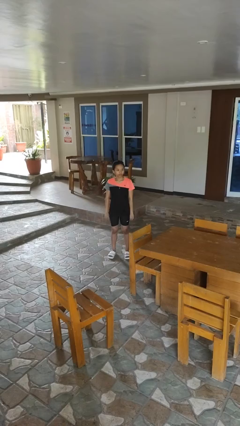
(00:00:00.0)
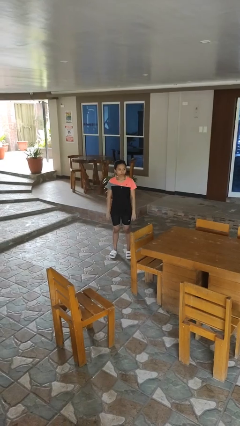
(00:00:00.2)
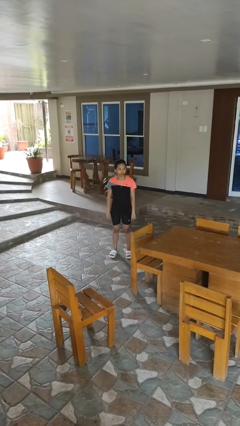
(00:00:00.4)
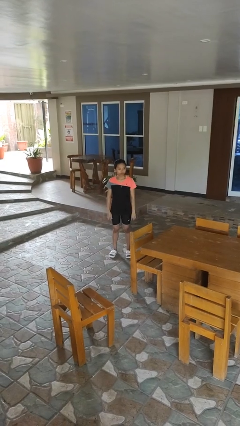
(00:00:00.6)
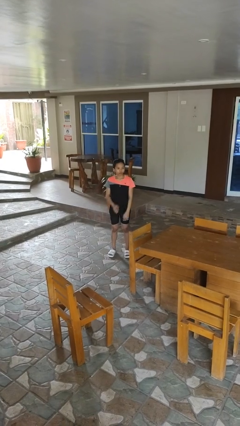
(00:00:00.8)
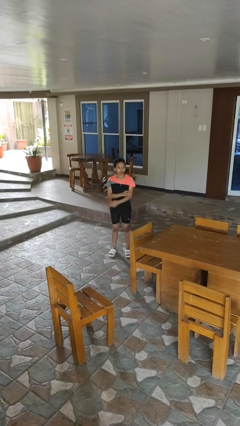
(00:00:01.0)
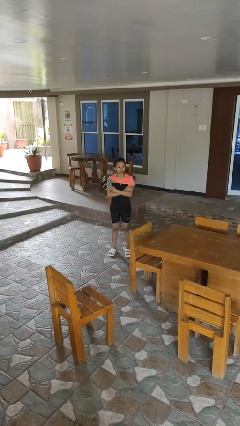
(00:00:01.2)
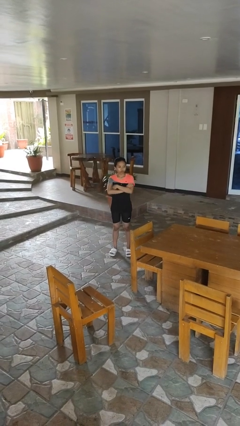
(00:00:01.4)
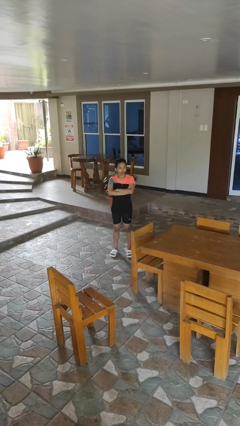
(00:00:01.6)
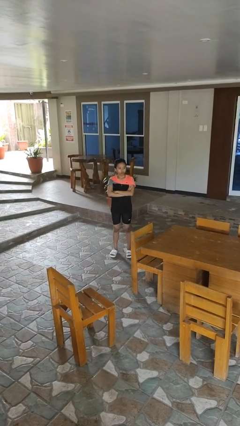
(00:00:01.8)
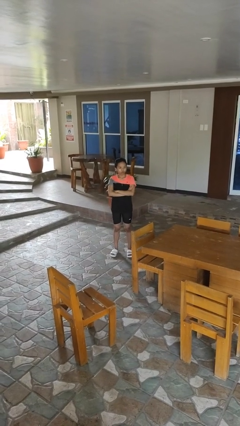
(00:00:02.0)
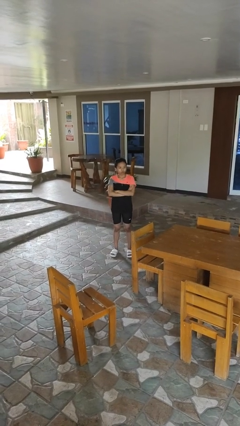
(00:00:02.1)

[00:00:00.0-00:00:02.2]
person crosses arms

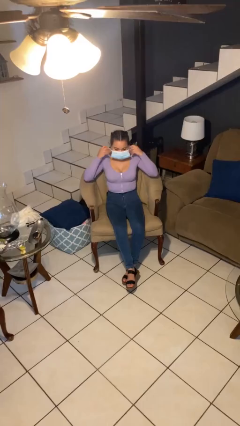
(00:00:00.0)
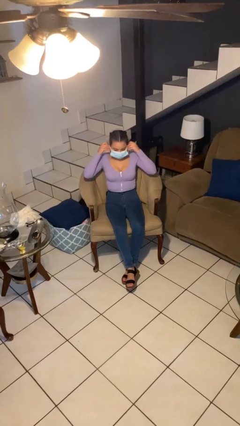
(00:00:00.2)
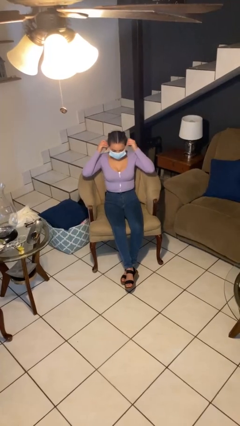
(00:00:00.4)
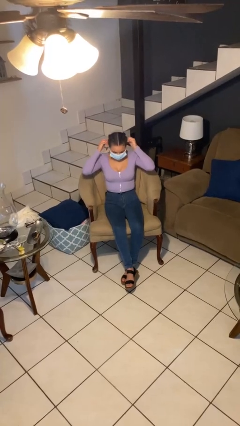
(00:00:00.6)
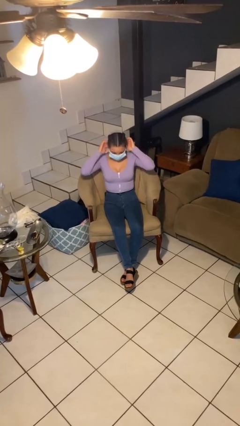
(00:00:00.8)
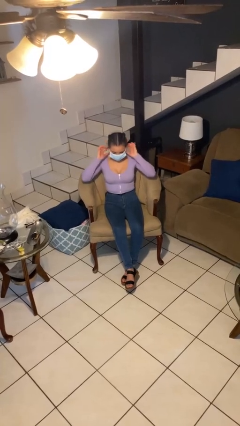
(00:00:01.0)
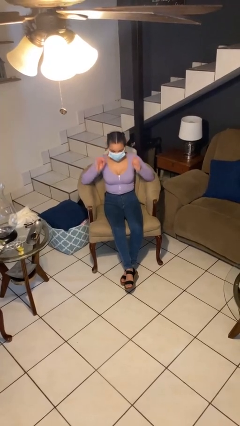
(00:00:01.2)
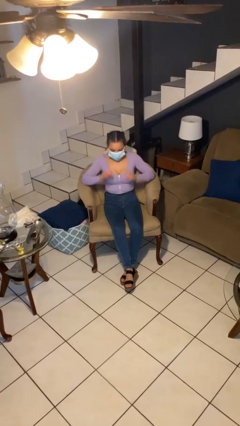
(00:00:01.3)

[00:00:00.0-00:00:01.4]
person puts on facemask

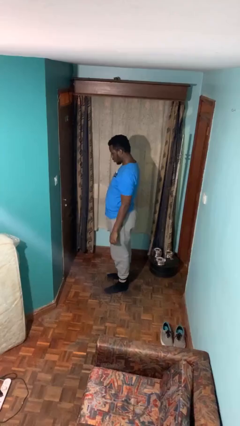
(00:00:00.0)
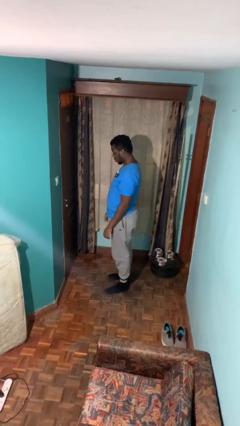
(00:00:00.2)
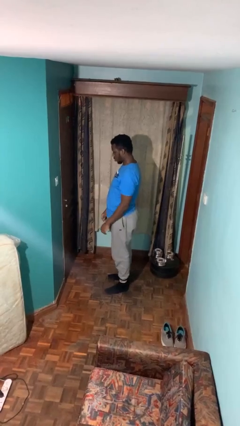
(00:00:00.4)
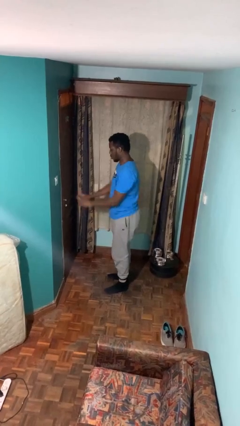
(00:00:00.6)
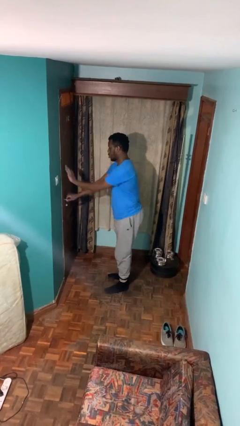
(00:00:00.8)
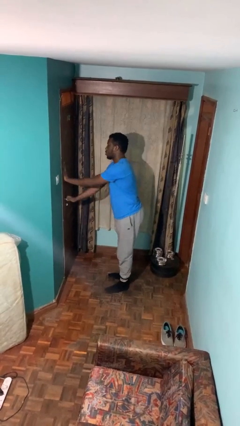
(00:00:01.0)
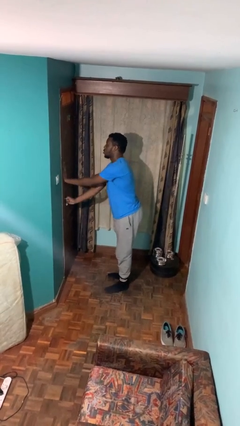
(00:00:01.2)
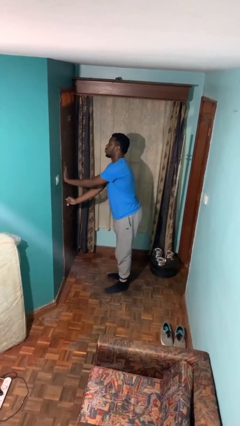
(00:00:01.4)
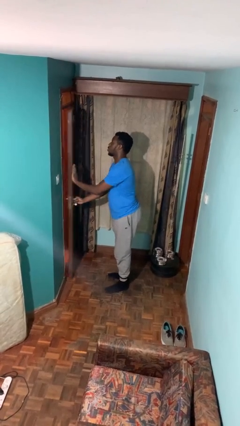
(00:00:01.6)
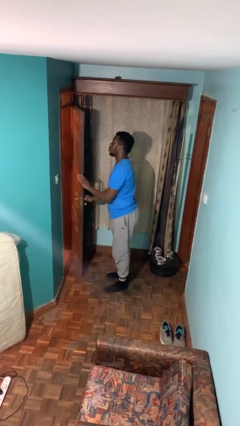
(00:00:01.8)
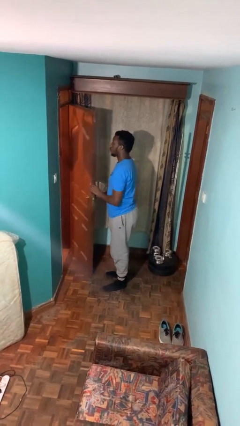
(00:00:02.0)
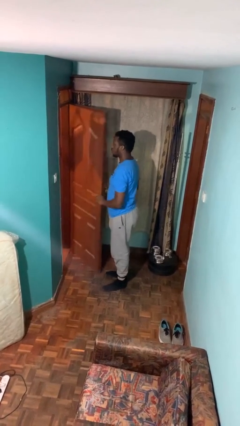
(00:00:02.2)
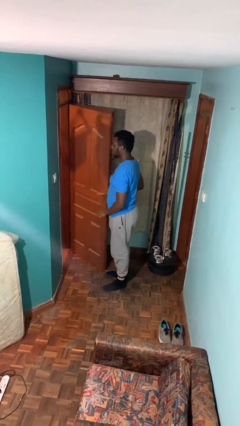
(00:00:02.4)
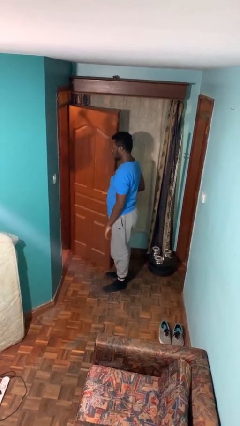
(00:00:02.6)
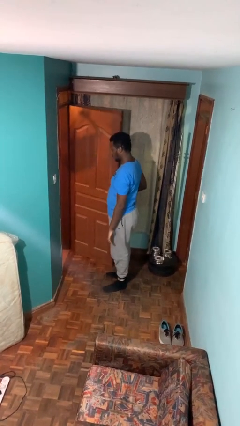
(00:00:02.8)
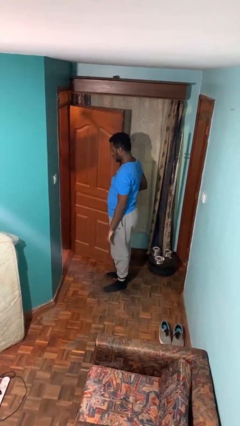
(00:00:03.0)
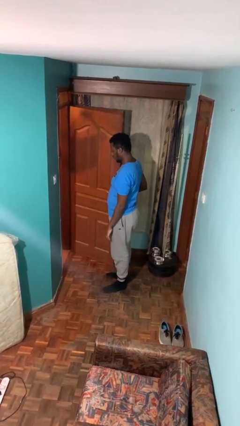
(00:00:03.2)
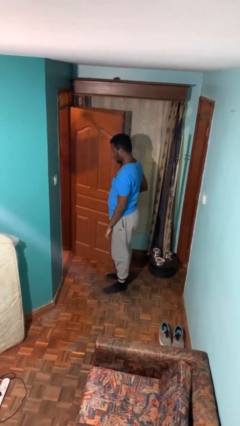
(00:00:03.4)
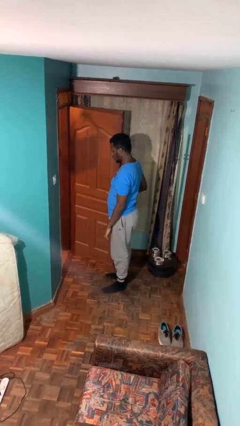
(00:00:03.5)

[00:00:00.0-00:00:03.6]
person opens facility door

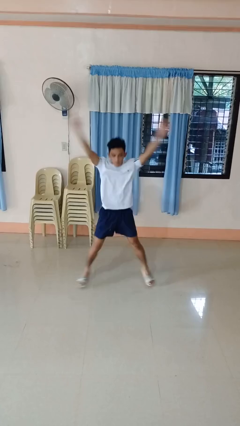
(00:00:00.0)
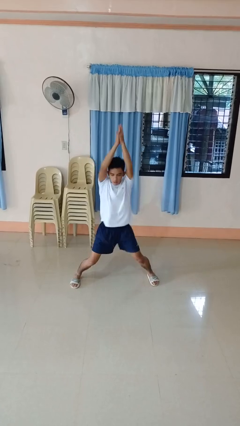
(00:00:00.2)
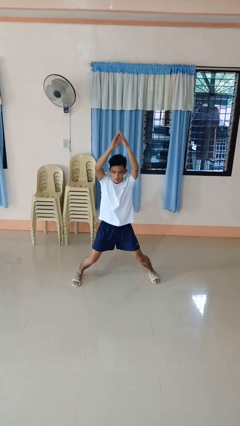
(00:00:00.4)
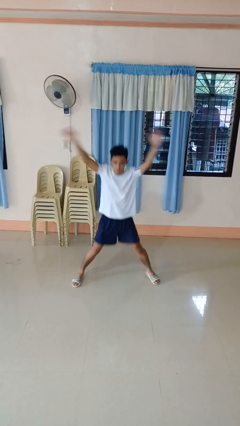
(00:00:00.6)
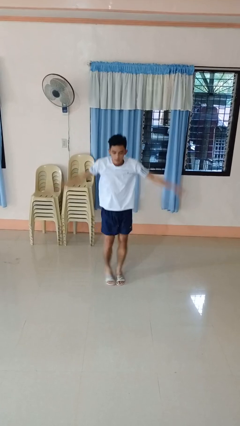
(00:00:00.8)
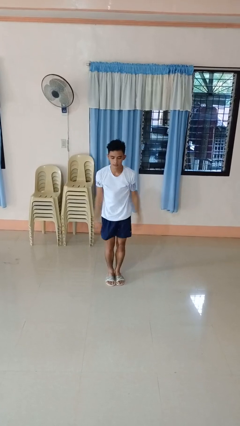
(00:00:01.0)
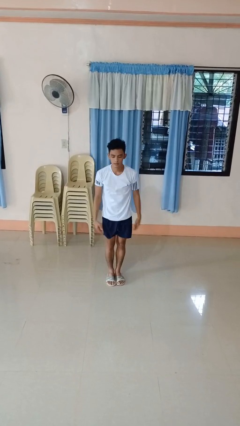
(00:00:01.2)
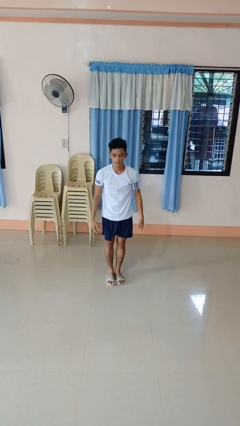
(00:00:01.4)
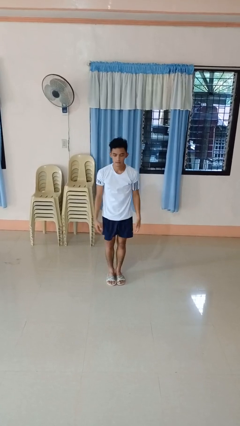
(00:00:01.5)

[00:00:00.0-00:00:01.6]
person exercises with jumping jacks

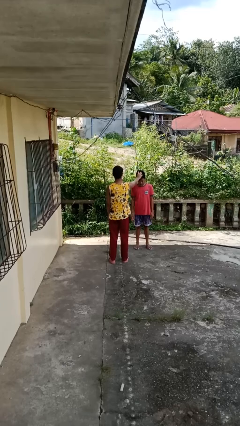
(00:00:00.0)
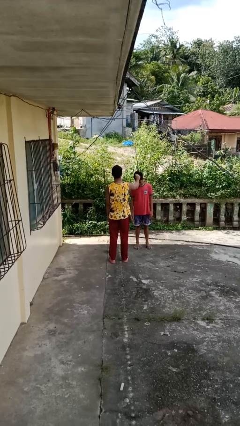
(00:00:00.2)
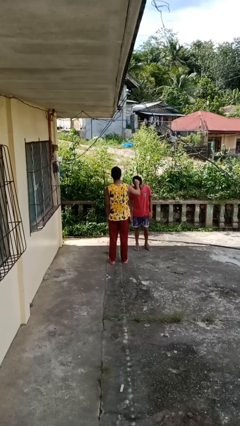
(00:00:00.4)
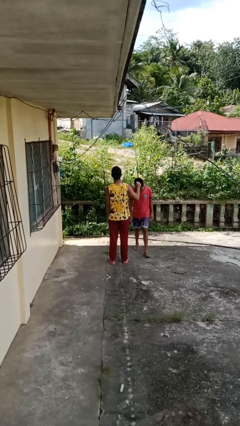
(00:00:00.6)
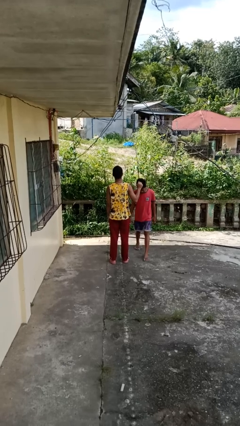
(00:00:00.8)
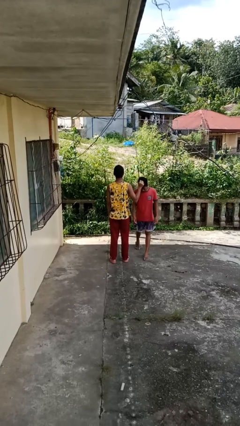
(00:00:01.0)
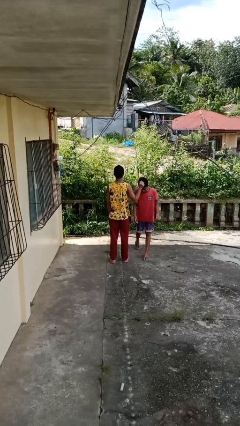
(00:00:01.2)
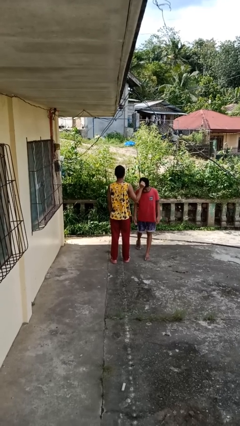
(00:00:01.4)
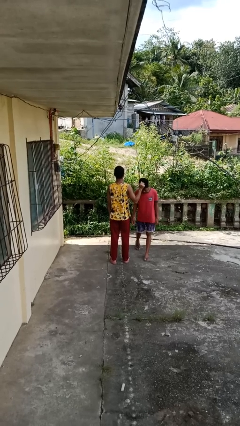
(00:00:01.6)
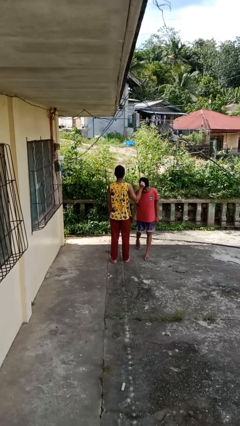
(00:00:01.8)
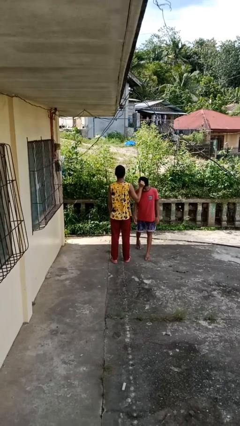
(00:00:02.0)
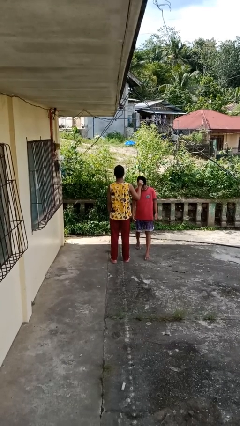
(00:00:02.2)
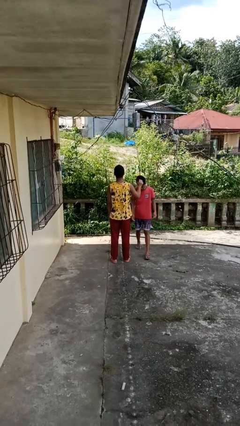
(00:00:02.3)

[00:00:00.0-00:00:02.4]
person grabs person by hair

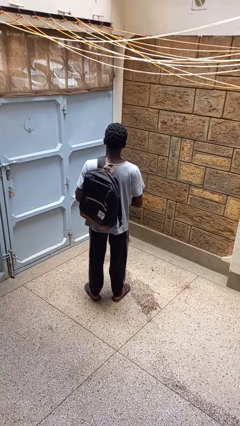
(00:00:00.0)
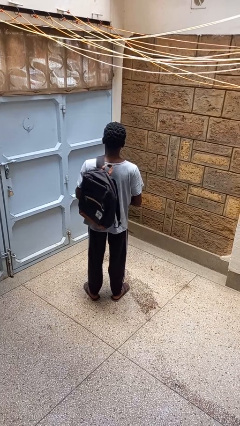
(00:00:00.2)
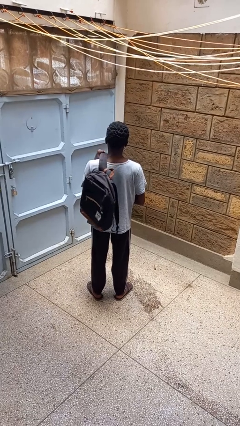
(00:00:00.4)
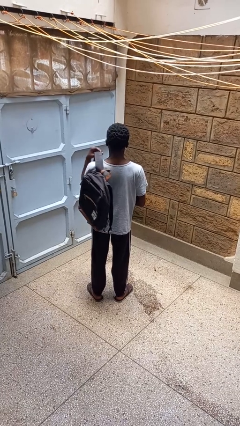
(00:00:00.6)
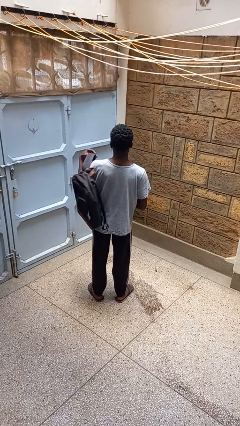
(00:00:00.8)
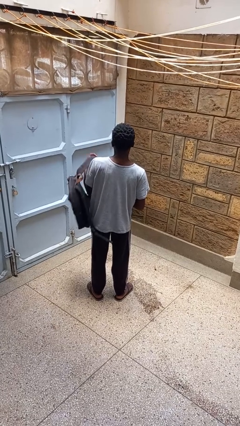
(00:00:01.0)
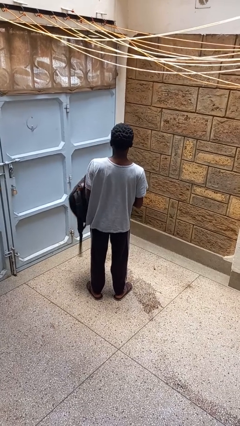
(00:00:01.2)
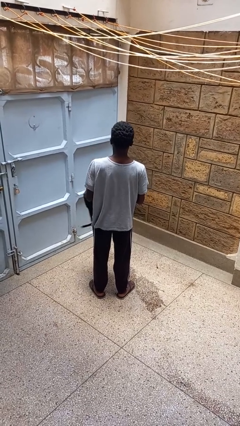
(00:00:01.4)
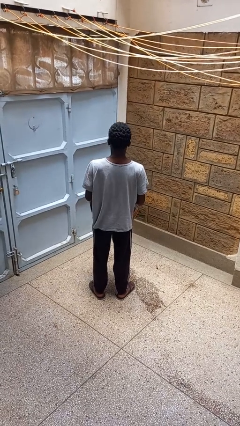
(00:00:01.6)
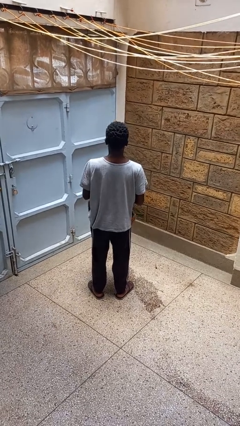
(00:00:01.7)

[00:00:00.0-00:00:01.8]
person takes off backpack

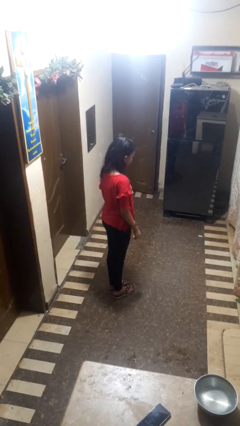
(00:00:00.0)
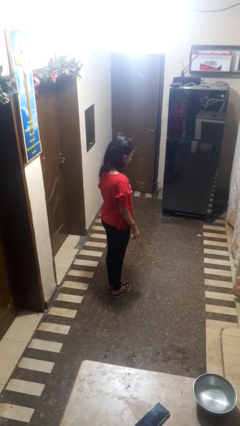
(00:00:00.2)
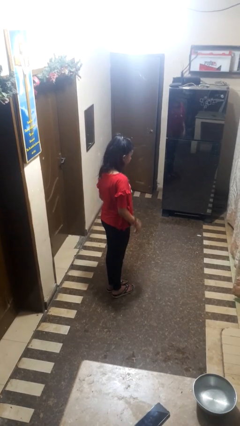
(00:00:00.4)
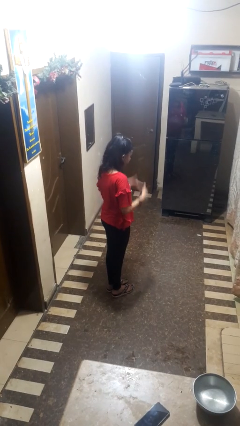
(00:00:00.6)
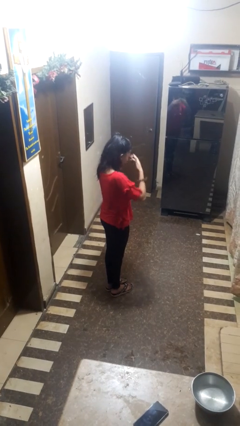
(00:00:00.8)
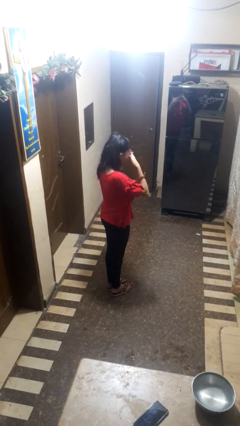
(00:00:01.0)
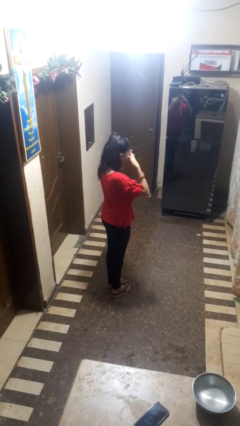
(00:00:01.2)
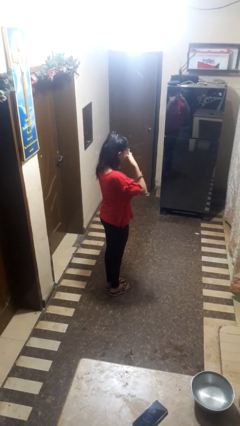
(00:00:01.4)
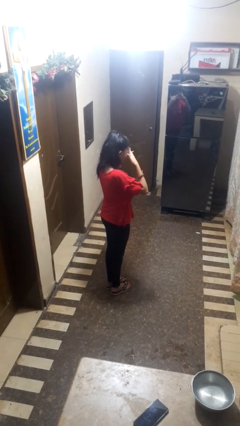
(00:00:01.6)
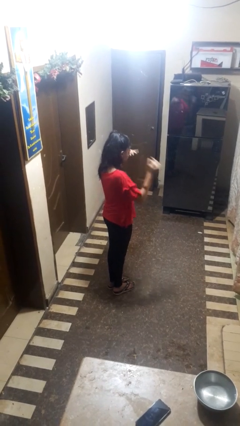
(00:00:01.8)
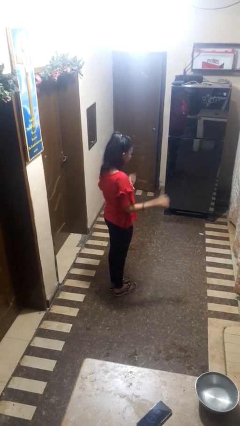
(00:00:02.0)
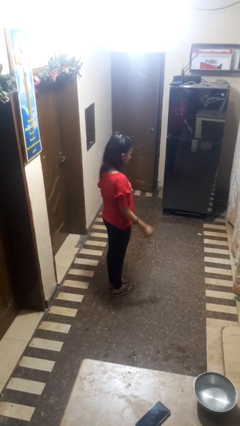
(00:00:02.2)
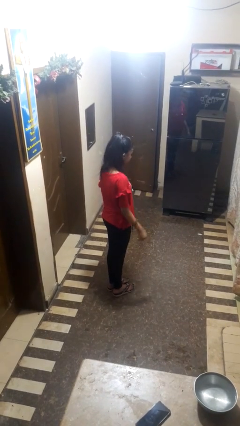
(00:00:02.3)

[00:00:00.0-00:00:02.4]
person rubs eyes

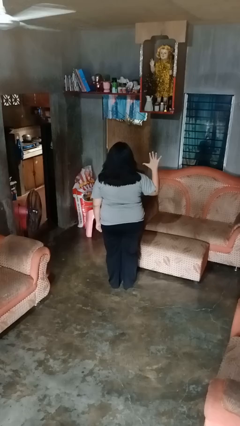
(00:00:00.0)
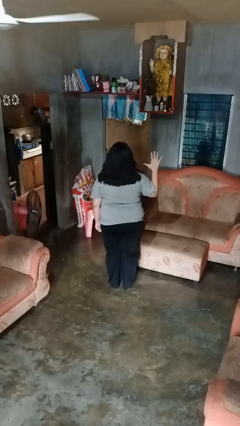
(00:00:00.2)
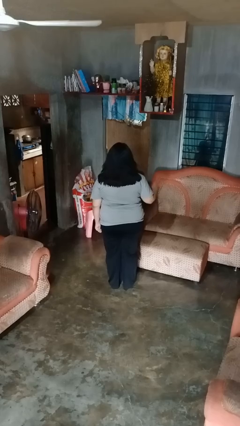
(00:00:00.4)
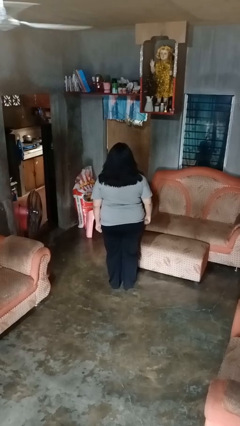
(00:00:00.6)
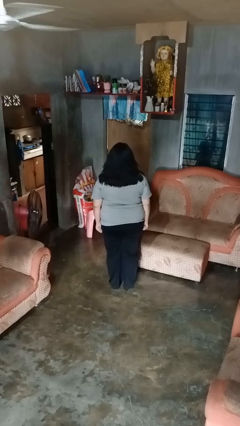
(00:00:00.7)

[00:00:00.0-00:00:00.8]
person gestures number five

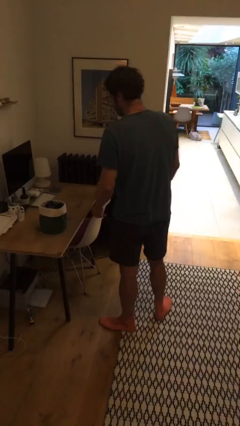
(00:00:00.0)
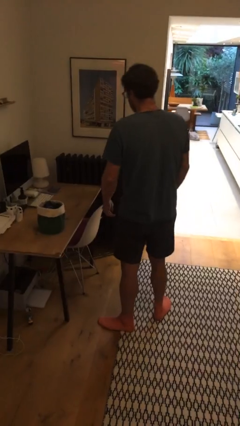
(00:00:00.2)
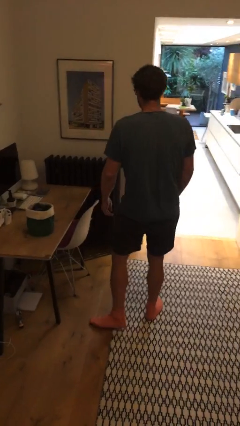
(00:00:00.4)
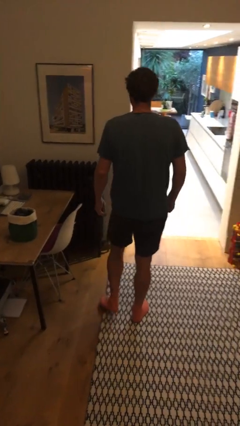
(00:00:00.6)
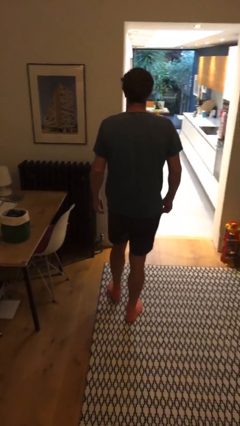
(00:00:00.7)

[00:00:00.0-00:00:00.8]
person puts down object on table
